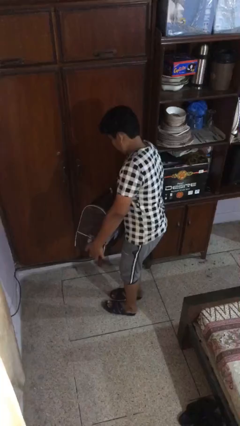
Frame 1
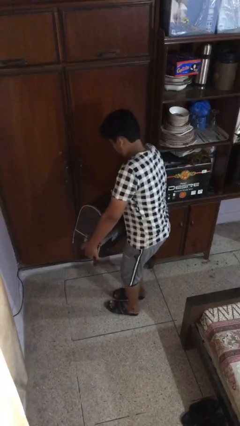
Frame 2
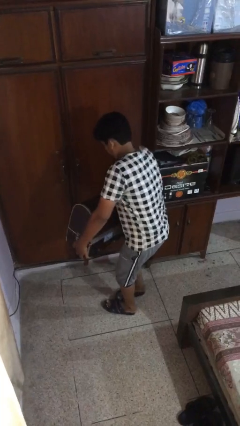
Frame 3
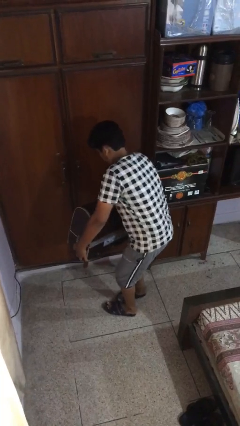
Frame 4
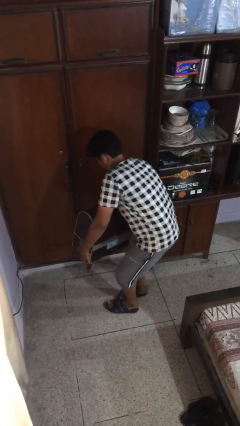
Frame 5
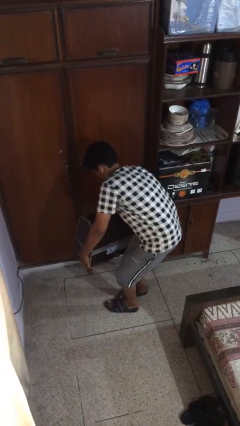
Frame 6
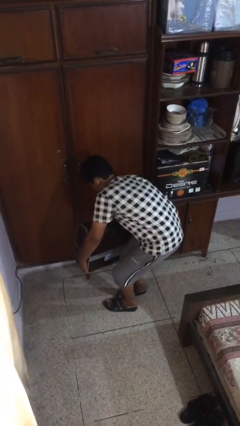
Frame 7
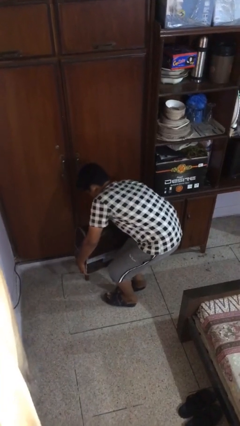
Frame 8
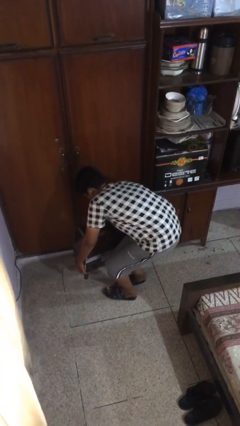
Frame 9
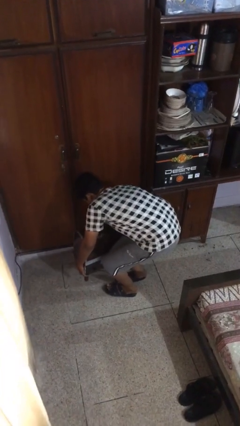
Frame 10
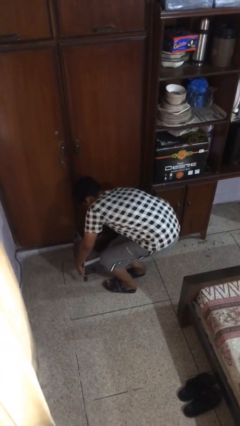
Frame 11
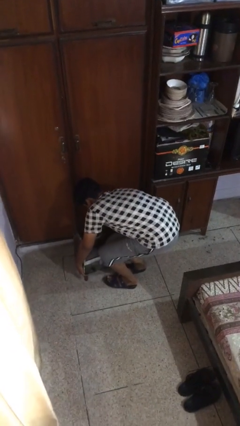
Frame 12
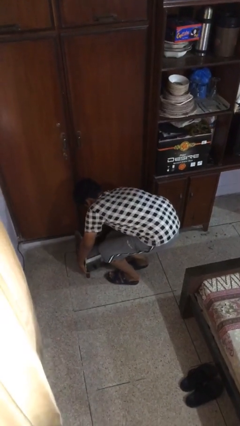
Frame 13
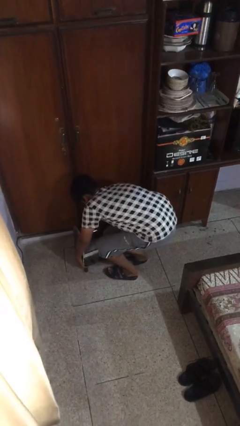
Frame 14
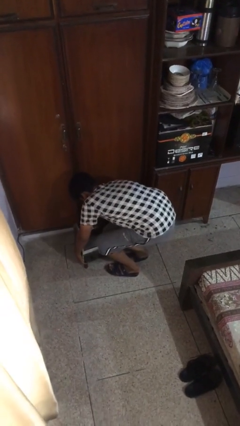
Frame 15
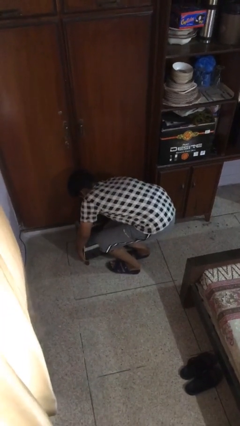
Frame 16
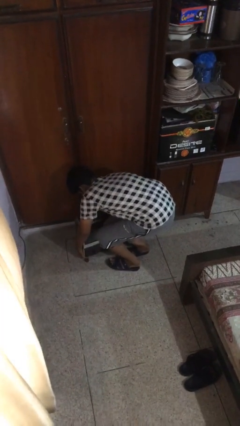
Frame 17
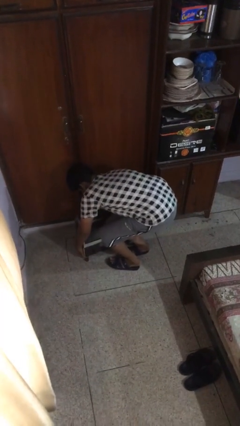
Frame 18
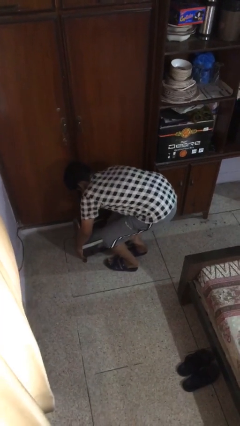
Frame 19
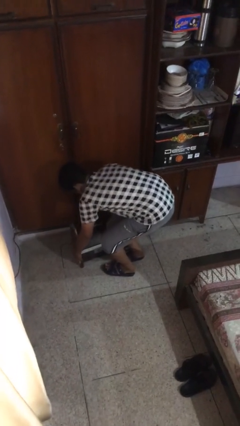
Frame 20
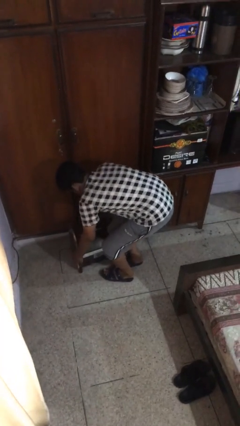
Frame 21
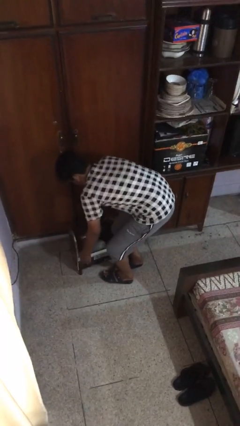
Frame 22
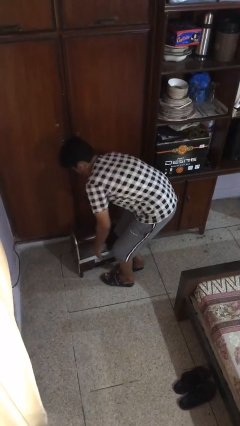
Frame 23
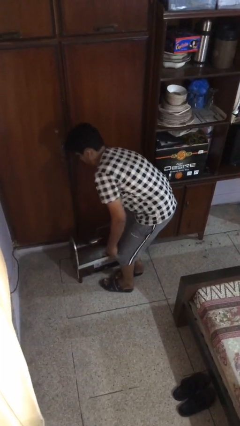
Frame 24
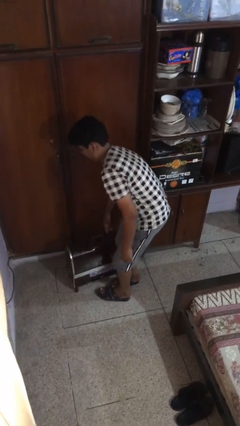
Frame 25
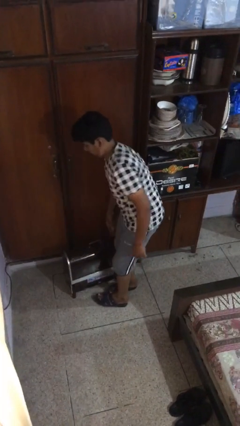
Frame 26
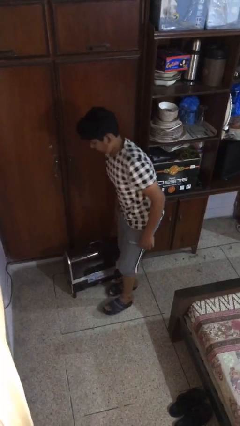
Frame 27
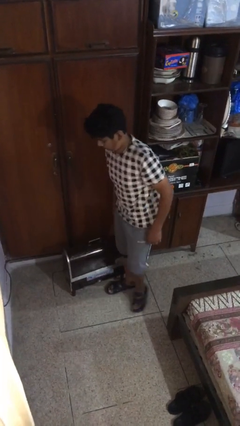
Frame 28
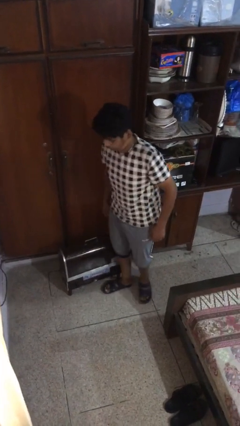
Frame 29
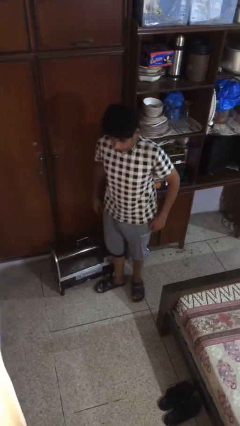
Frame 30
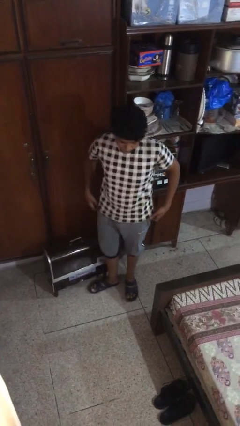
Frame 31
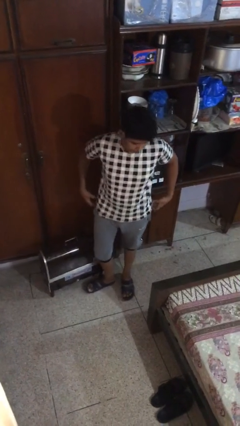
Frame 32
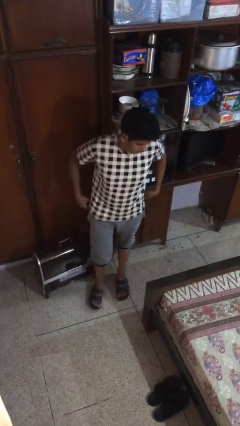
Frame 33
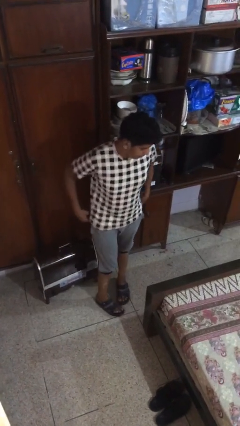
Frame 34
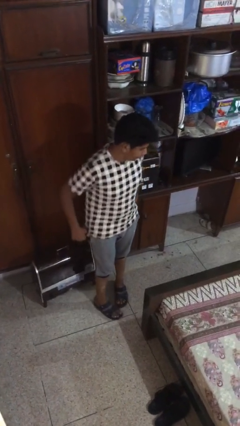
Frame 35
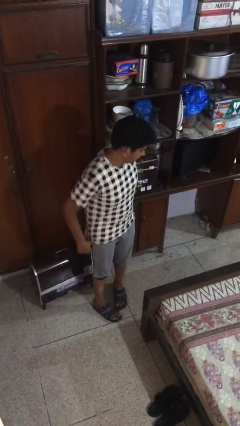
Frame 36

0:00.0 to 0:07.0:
person puts down object on floor

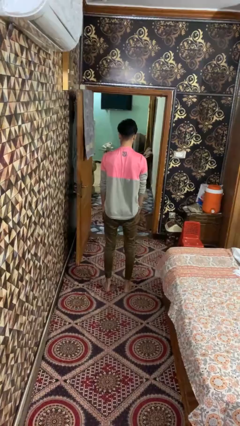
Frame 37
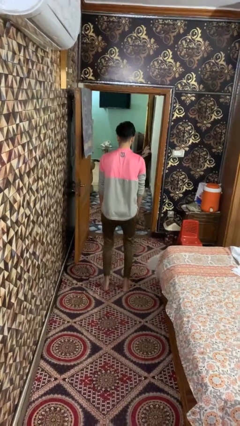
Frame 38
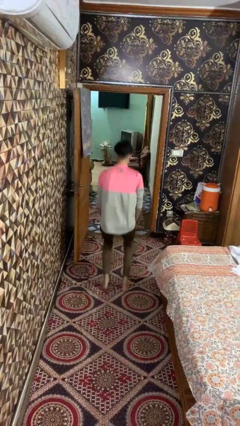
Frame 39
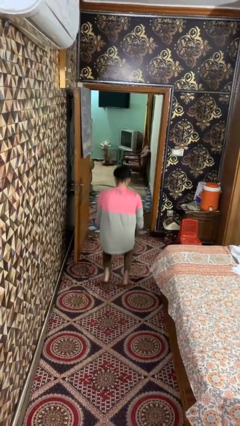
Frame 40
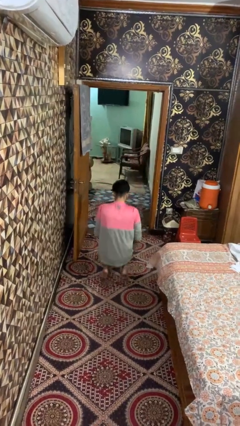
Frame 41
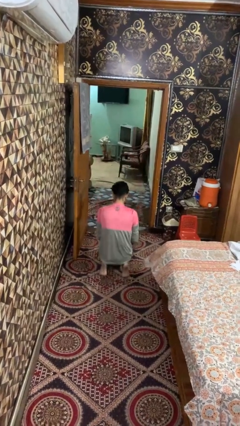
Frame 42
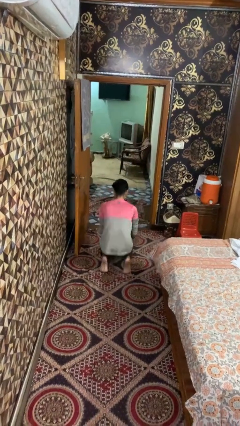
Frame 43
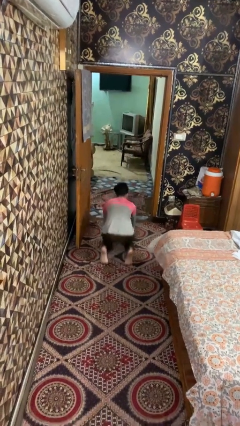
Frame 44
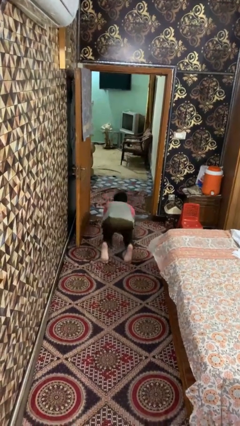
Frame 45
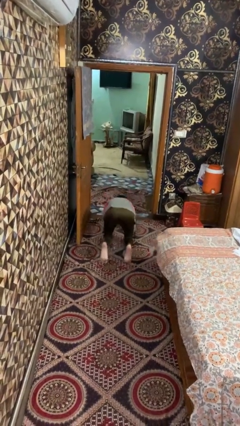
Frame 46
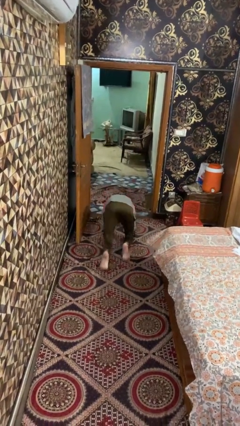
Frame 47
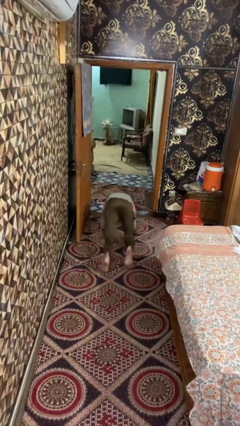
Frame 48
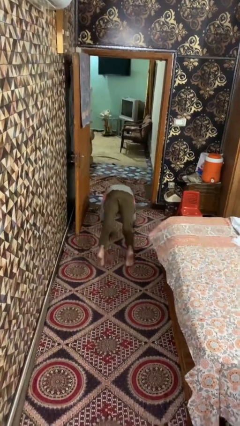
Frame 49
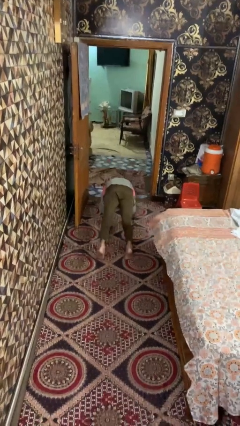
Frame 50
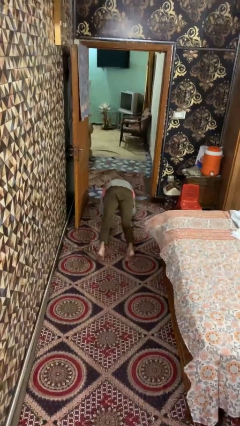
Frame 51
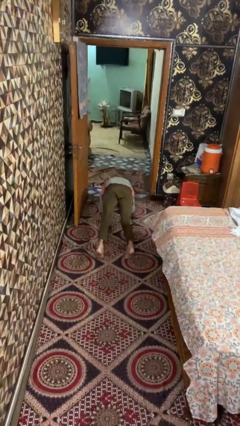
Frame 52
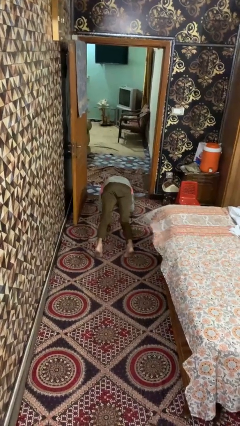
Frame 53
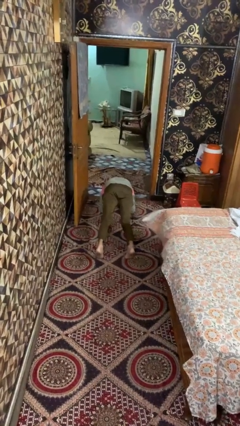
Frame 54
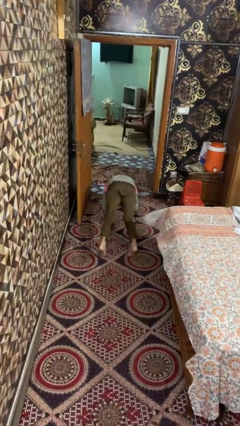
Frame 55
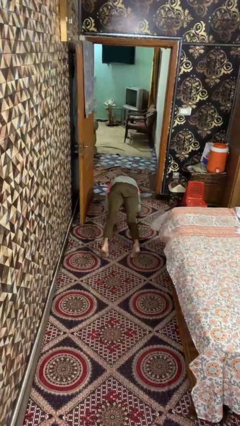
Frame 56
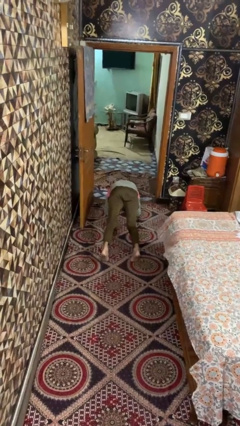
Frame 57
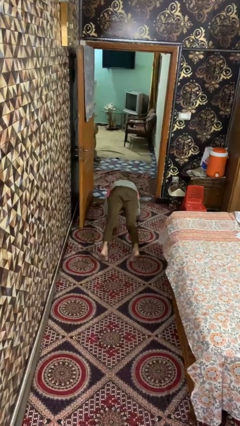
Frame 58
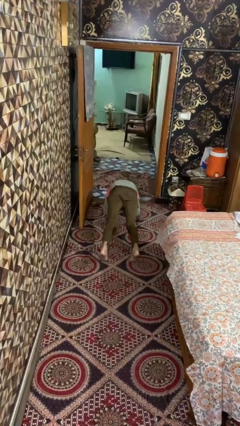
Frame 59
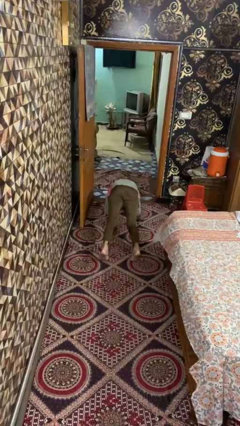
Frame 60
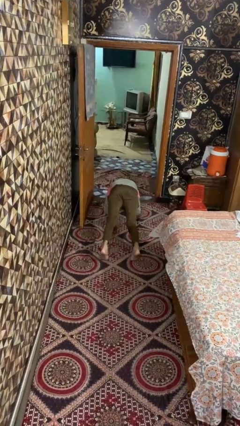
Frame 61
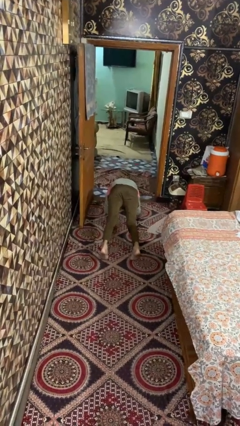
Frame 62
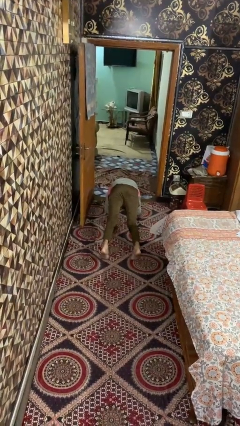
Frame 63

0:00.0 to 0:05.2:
person exercises with plank

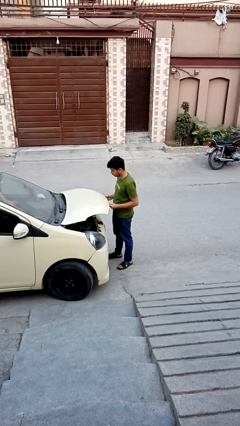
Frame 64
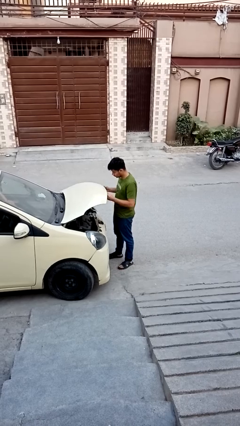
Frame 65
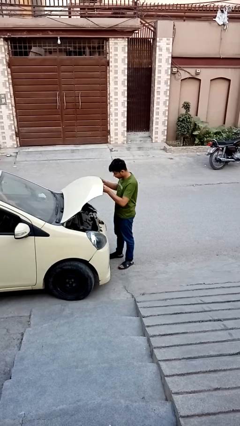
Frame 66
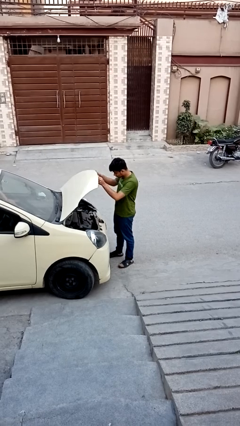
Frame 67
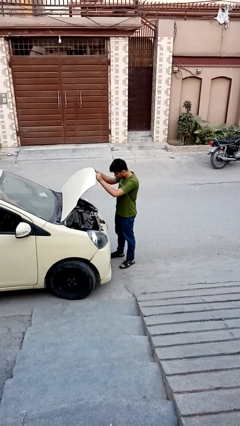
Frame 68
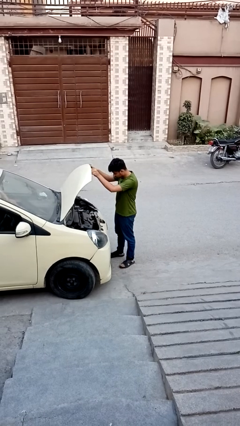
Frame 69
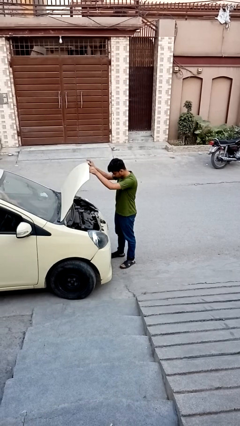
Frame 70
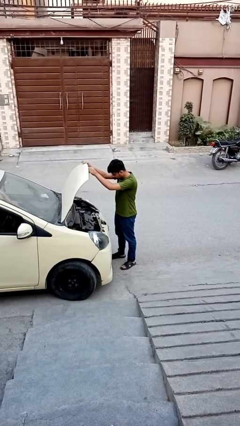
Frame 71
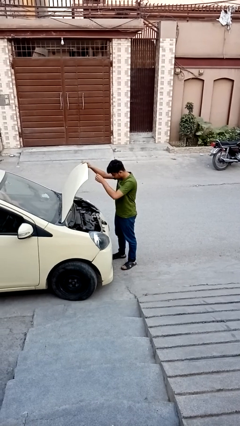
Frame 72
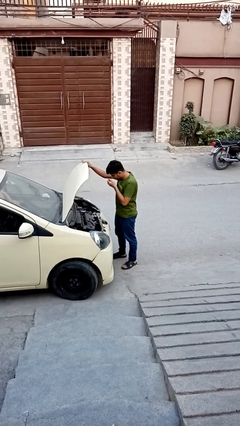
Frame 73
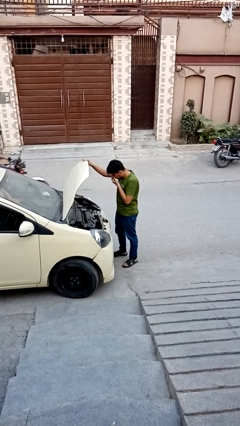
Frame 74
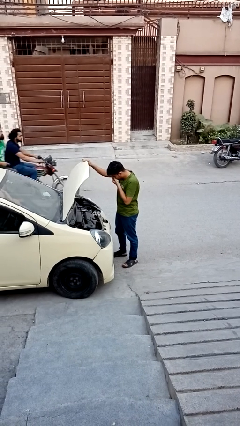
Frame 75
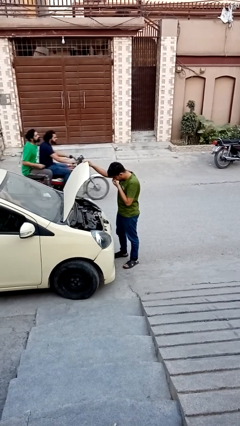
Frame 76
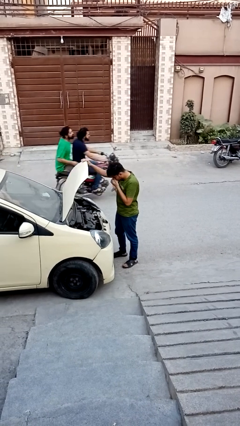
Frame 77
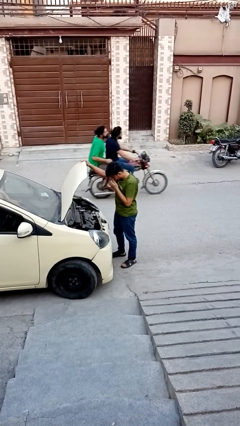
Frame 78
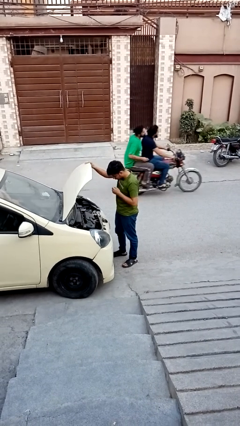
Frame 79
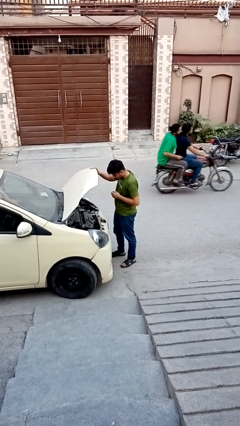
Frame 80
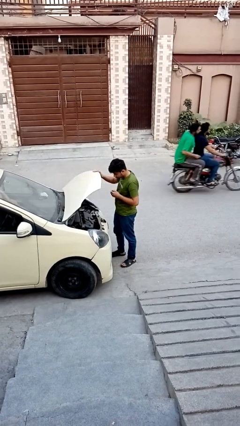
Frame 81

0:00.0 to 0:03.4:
person opens car hood

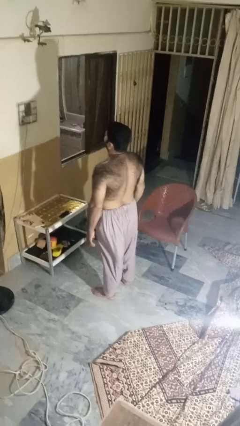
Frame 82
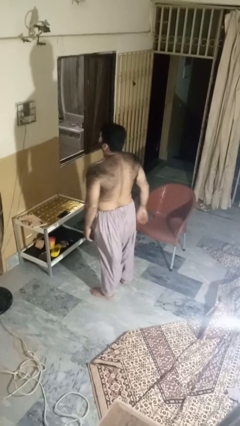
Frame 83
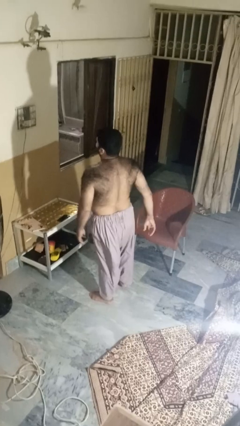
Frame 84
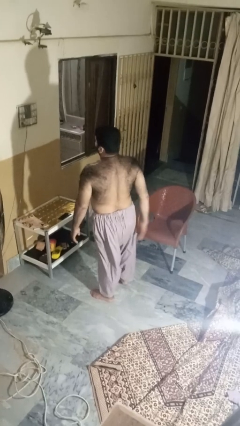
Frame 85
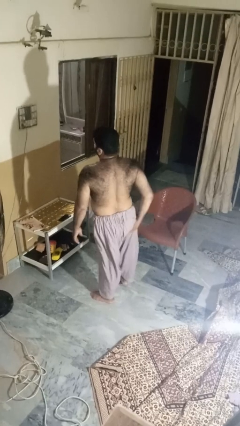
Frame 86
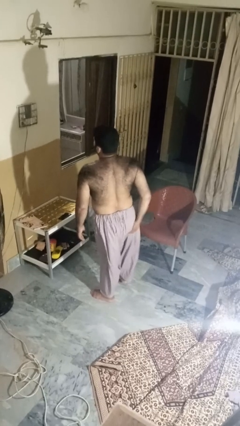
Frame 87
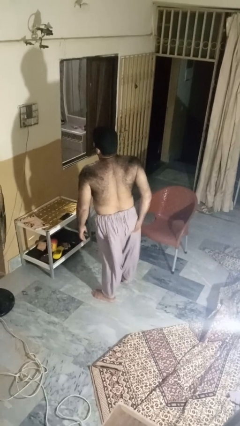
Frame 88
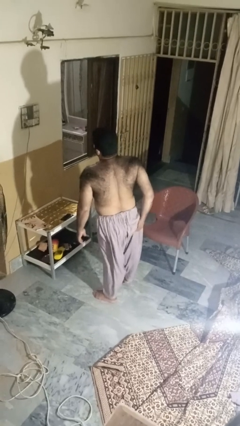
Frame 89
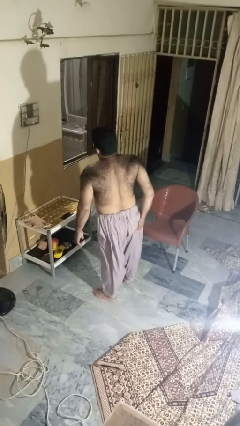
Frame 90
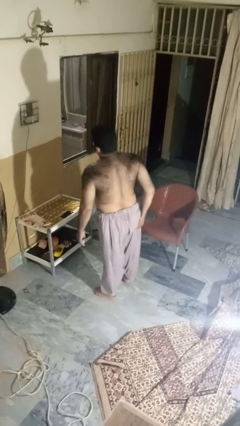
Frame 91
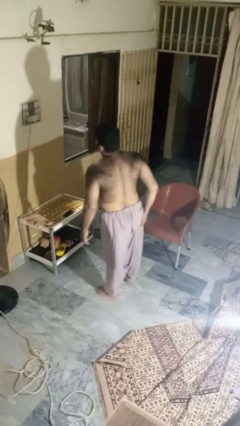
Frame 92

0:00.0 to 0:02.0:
person wiggles hips
